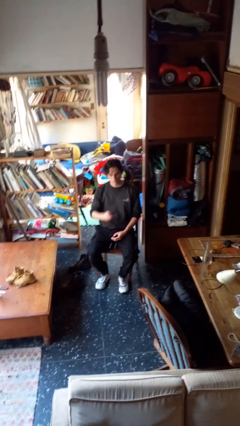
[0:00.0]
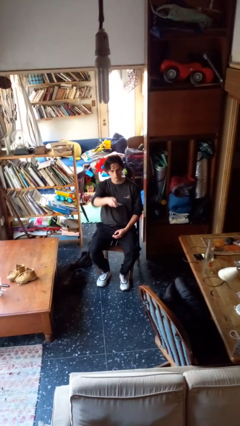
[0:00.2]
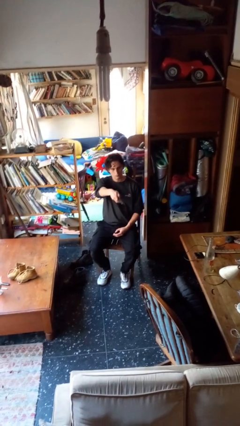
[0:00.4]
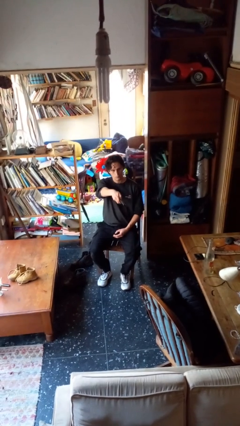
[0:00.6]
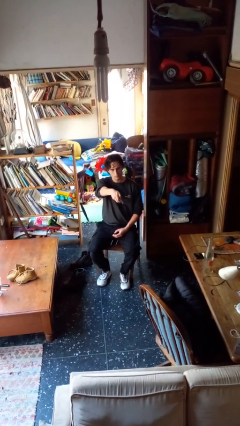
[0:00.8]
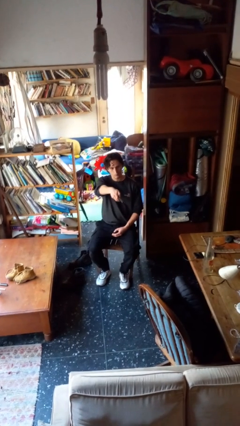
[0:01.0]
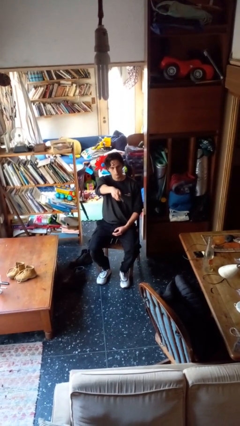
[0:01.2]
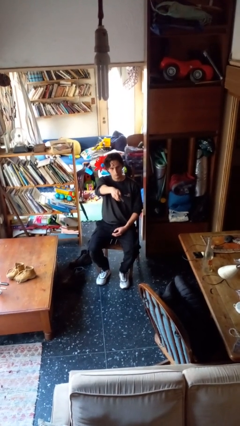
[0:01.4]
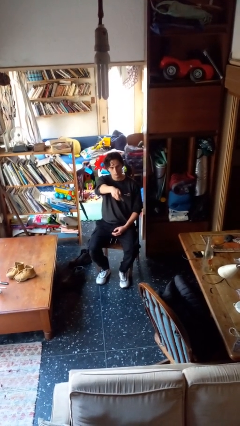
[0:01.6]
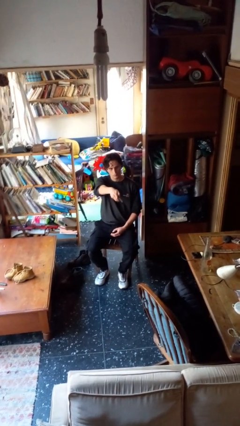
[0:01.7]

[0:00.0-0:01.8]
person uses television remote

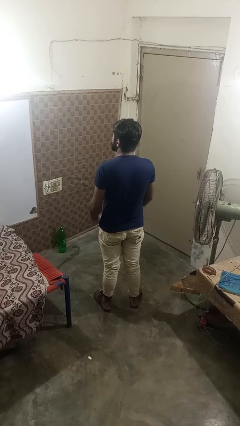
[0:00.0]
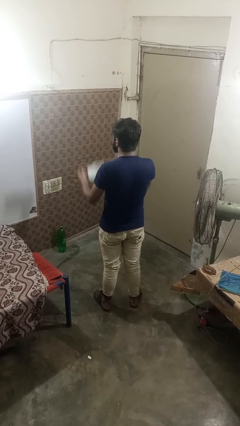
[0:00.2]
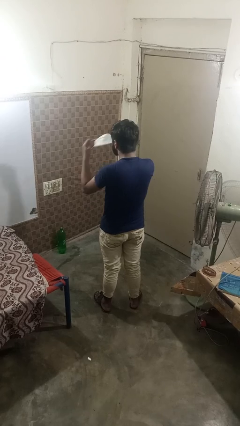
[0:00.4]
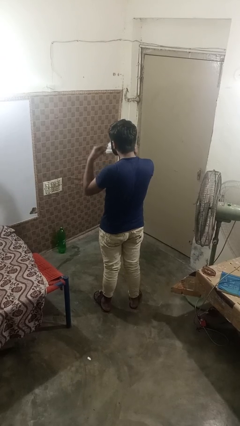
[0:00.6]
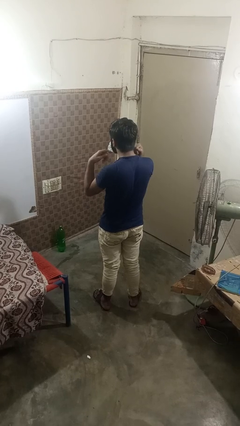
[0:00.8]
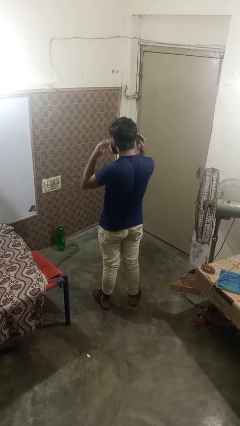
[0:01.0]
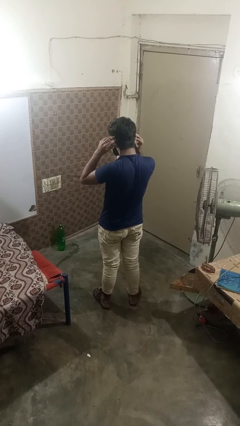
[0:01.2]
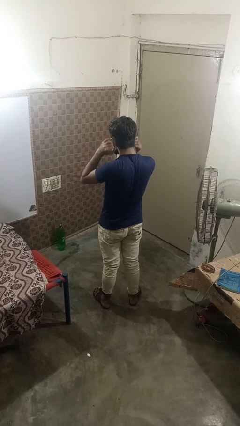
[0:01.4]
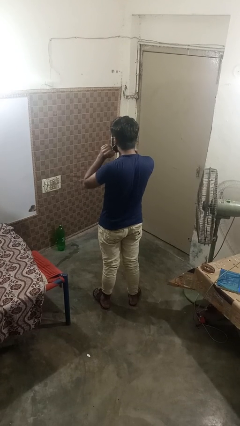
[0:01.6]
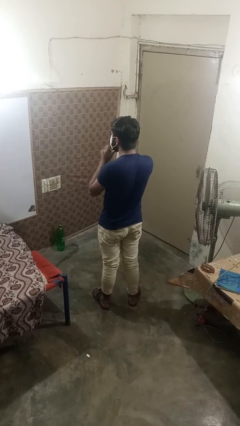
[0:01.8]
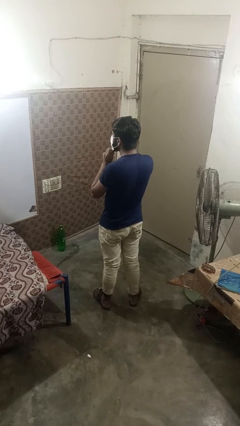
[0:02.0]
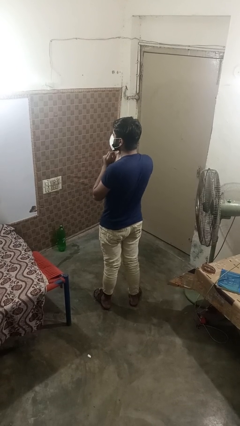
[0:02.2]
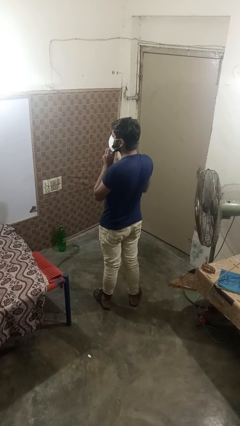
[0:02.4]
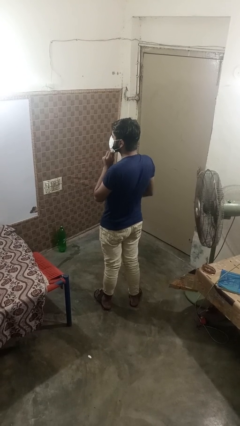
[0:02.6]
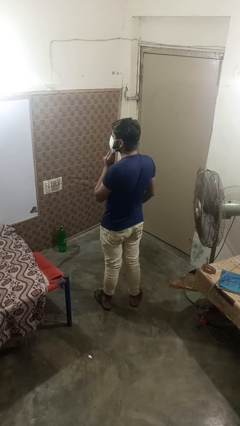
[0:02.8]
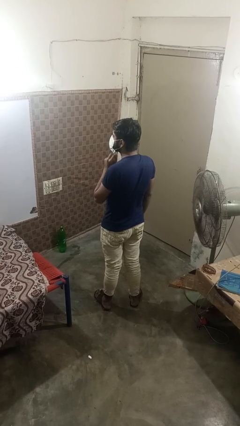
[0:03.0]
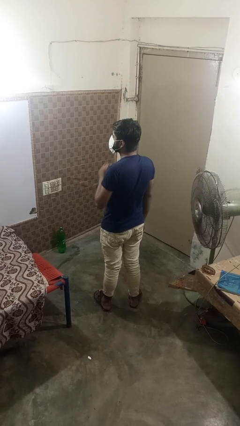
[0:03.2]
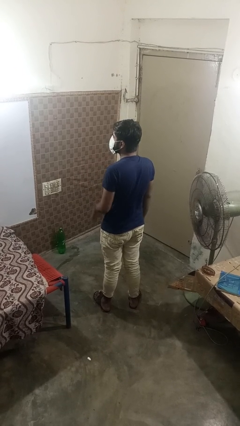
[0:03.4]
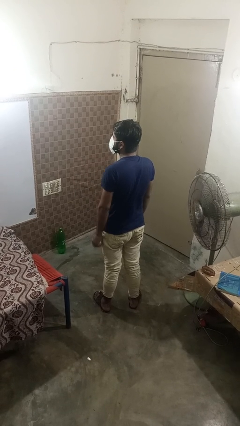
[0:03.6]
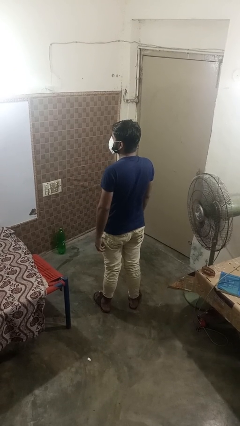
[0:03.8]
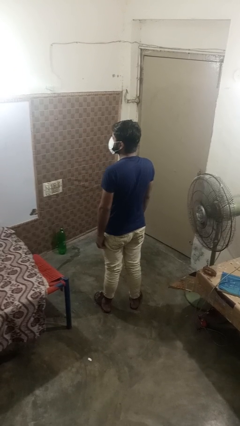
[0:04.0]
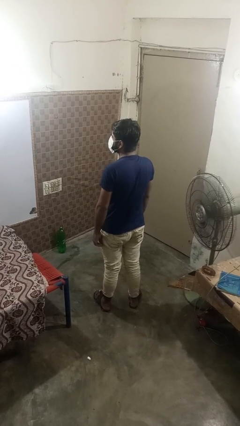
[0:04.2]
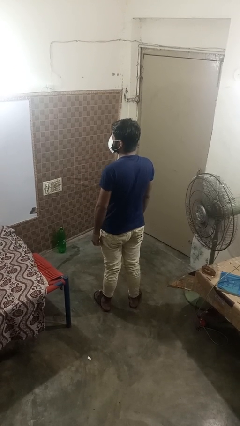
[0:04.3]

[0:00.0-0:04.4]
person puts on facemask

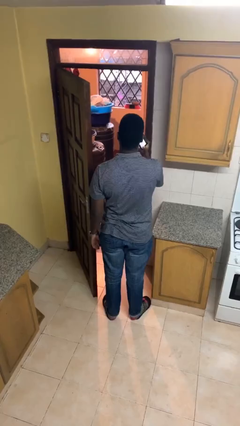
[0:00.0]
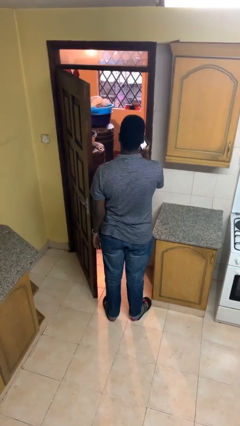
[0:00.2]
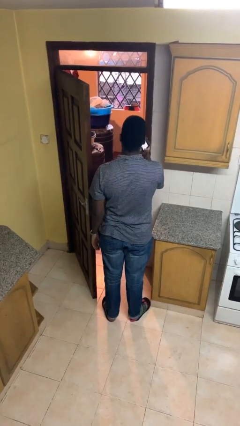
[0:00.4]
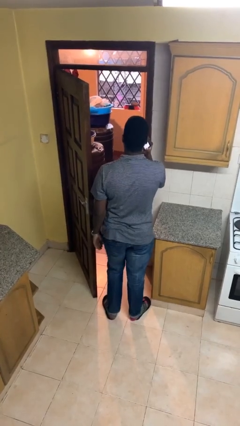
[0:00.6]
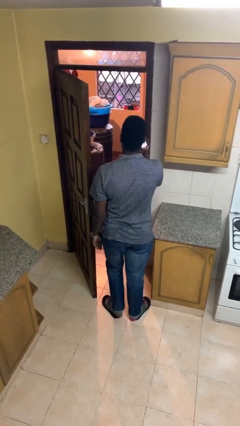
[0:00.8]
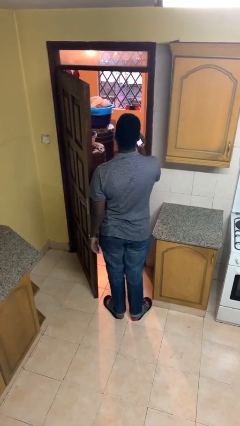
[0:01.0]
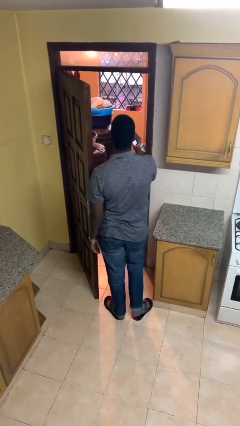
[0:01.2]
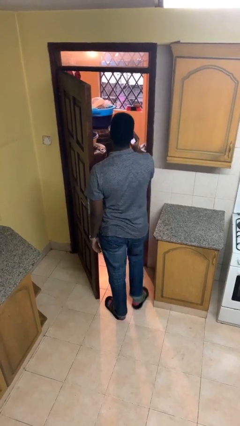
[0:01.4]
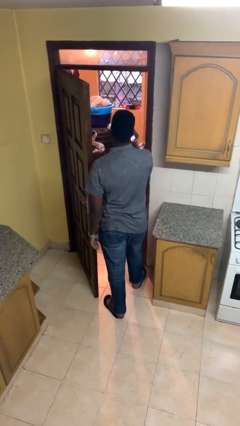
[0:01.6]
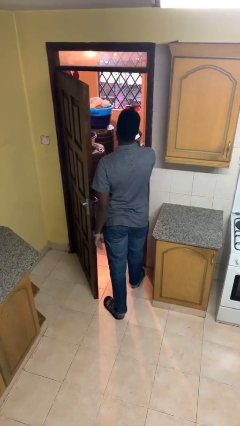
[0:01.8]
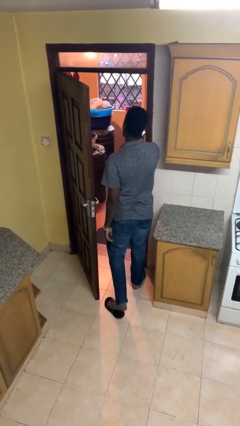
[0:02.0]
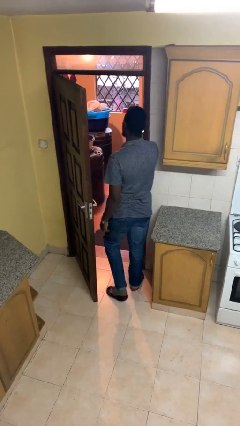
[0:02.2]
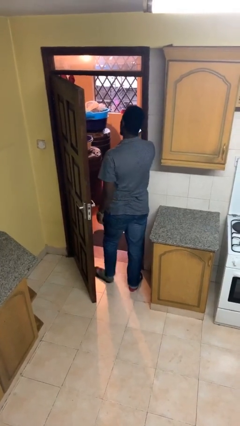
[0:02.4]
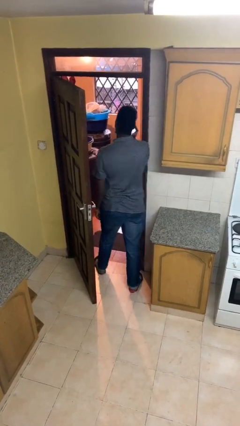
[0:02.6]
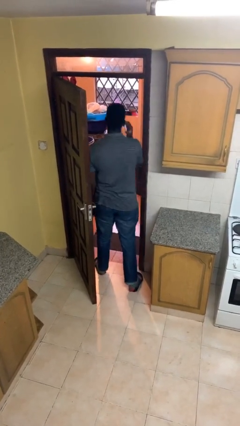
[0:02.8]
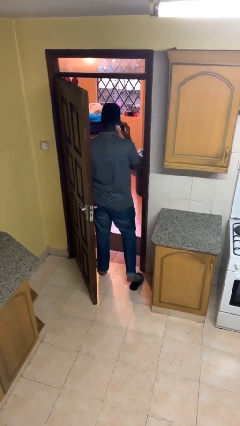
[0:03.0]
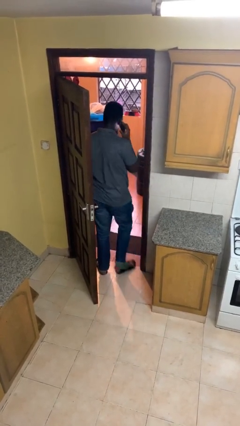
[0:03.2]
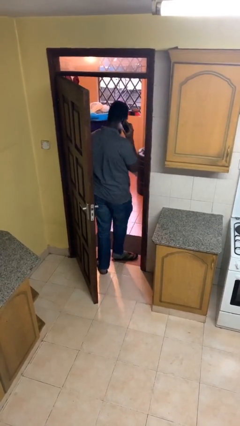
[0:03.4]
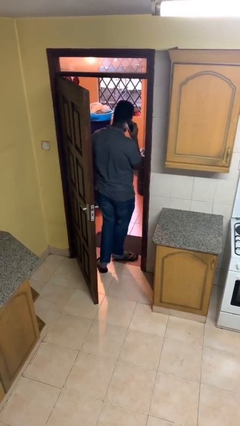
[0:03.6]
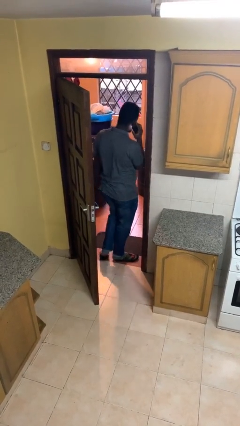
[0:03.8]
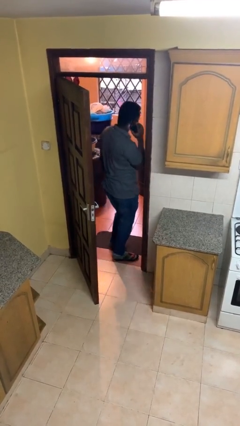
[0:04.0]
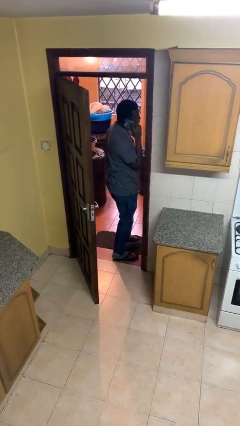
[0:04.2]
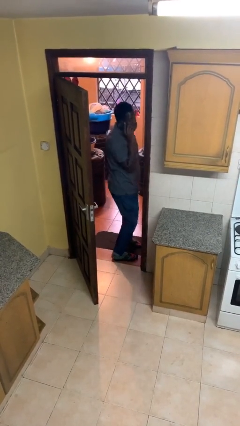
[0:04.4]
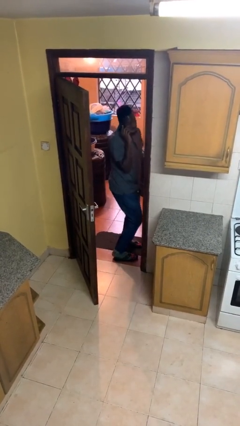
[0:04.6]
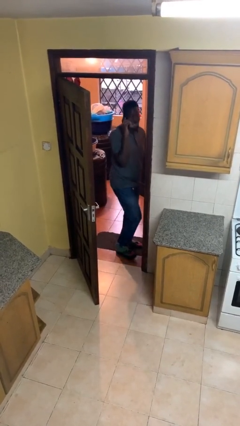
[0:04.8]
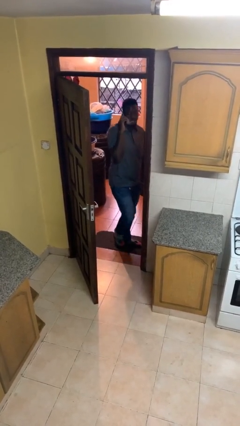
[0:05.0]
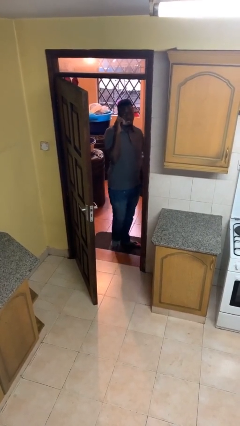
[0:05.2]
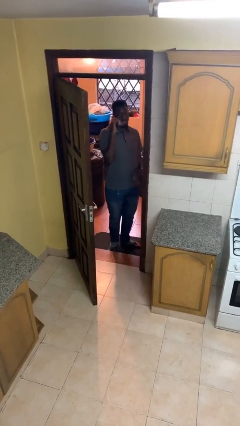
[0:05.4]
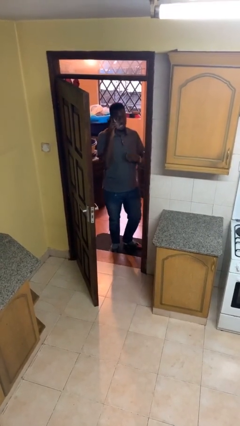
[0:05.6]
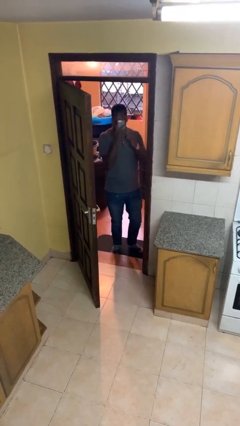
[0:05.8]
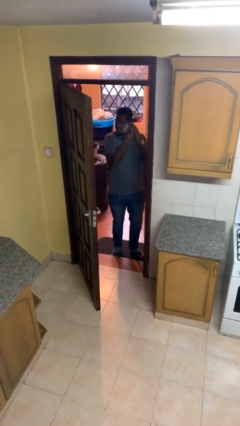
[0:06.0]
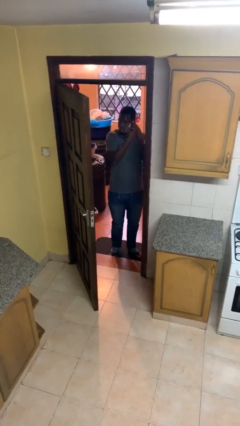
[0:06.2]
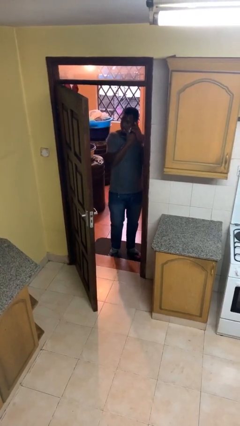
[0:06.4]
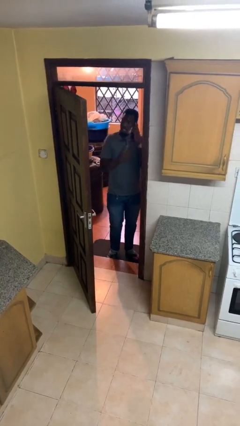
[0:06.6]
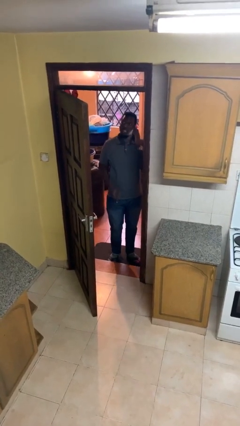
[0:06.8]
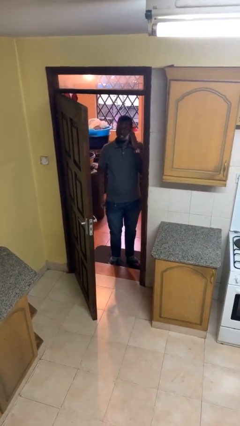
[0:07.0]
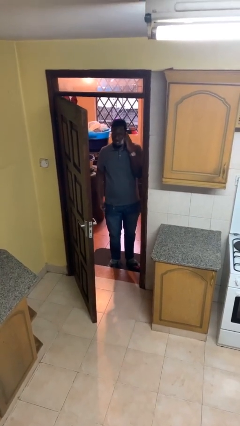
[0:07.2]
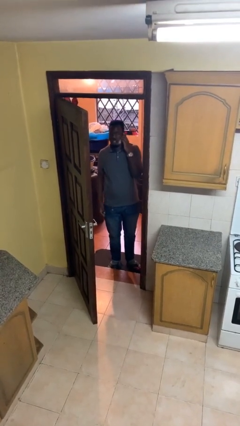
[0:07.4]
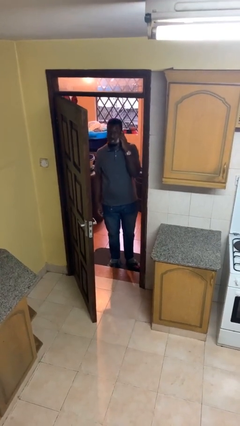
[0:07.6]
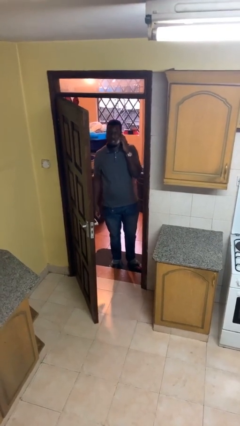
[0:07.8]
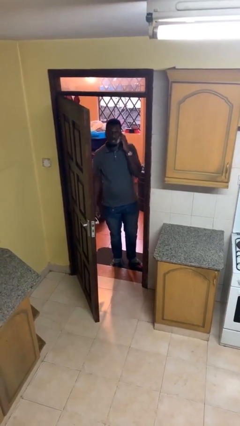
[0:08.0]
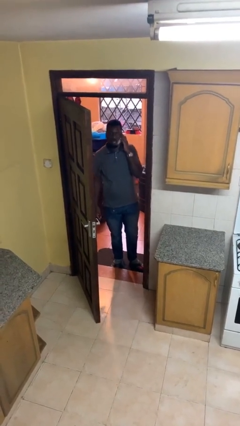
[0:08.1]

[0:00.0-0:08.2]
person exits scene through structure

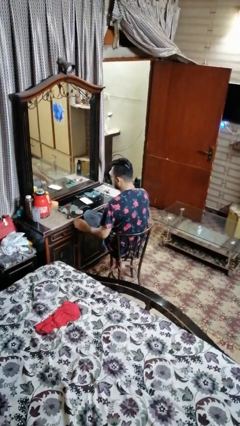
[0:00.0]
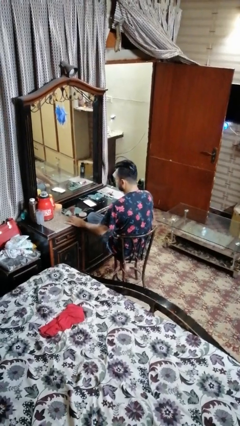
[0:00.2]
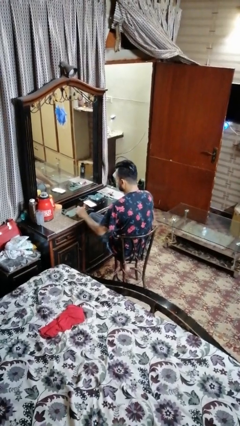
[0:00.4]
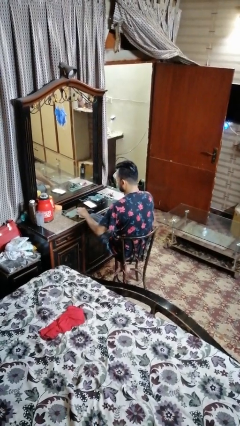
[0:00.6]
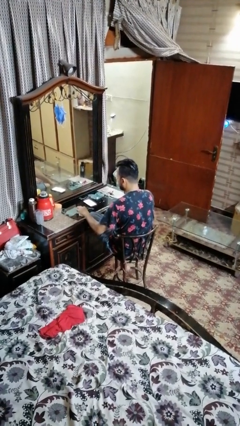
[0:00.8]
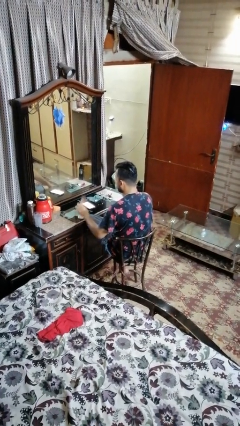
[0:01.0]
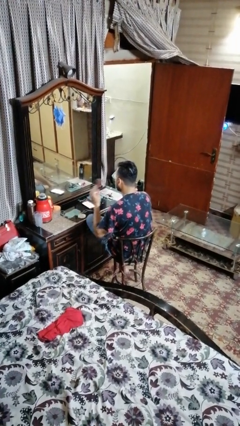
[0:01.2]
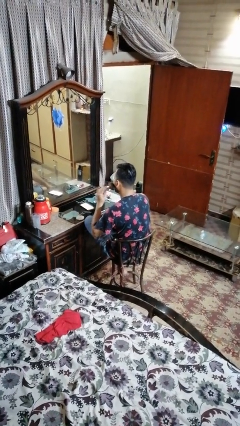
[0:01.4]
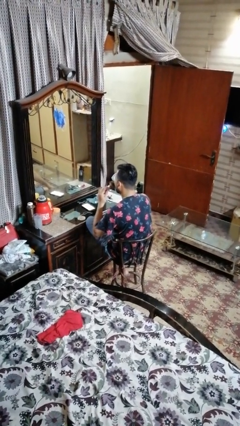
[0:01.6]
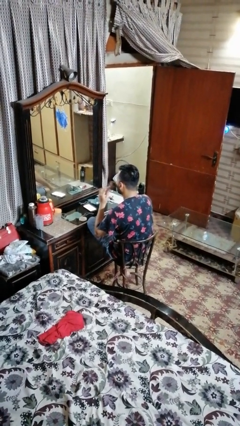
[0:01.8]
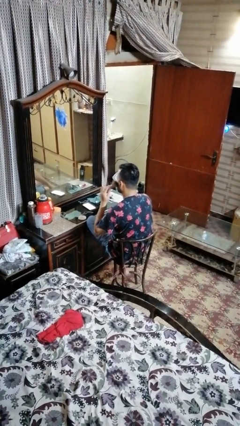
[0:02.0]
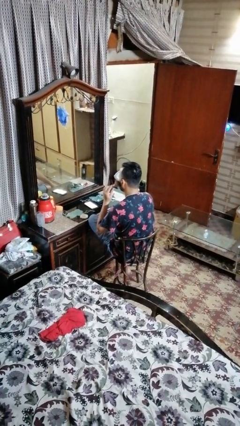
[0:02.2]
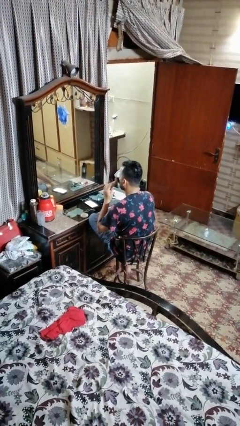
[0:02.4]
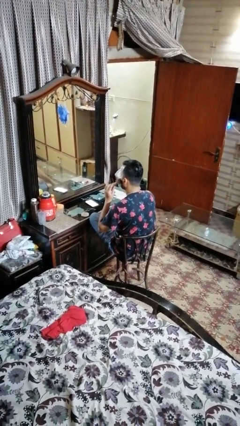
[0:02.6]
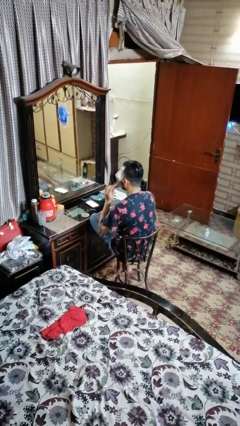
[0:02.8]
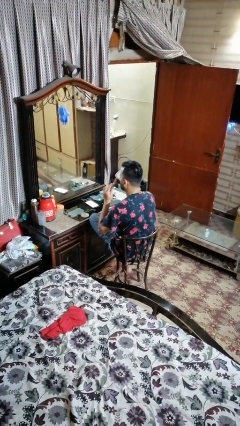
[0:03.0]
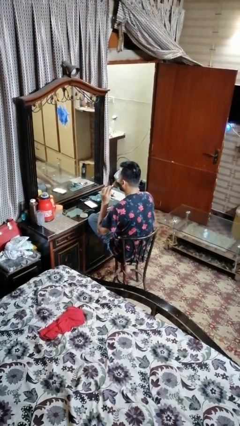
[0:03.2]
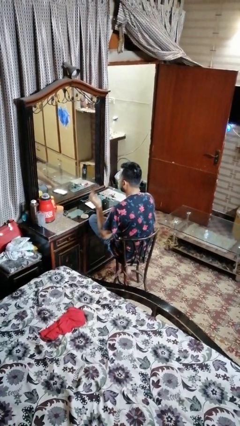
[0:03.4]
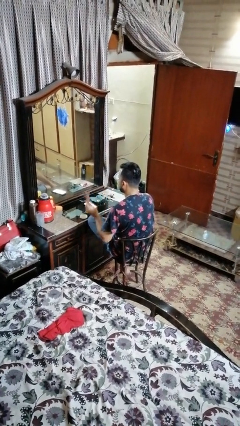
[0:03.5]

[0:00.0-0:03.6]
person applies foundation makeup

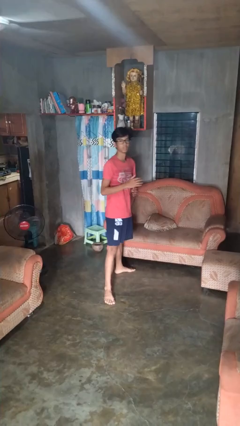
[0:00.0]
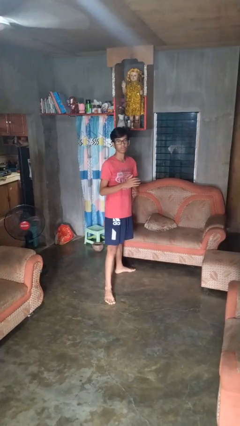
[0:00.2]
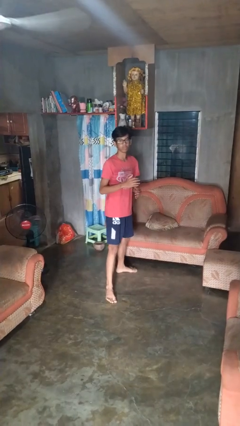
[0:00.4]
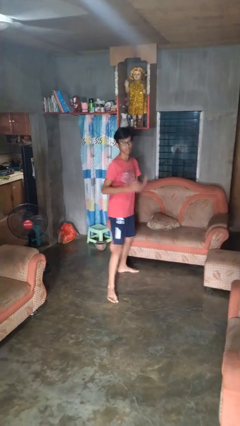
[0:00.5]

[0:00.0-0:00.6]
person karate chop
